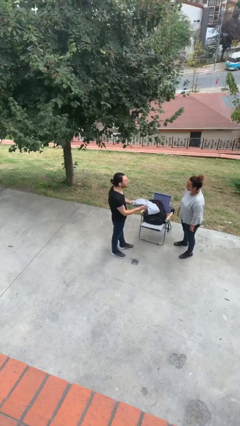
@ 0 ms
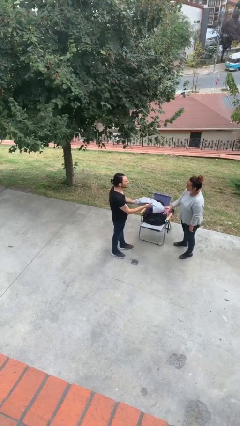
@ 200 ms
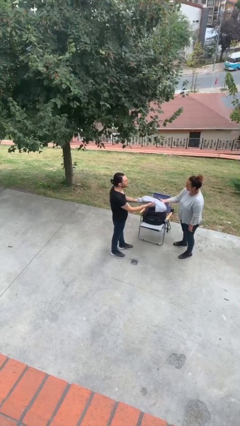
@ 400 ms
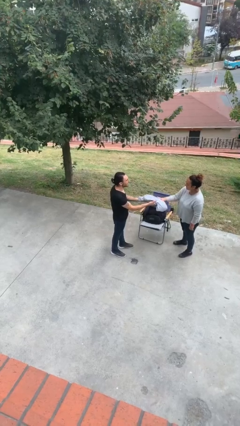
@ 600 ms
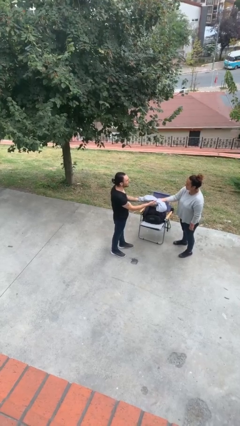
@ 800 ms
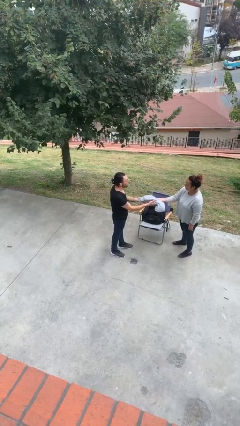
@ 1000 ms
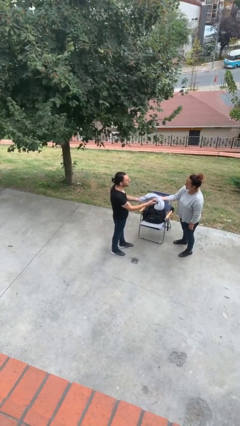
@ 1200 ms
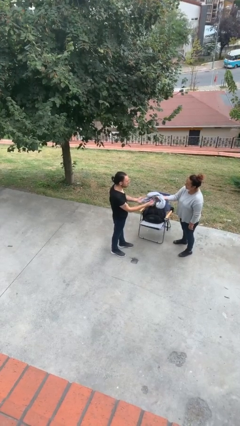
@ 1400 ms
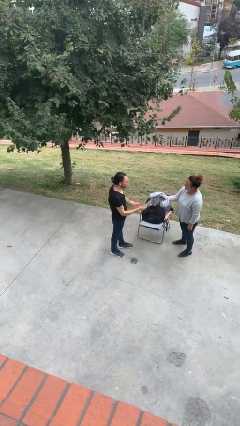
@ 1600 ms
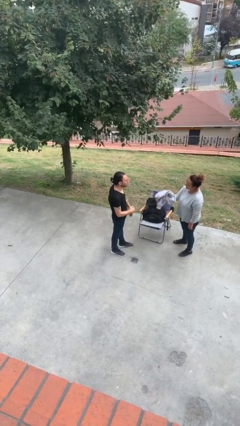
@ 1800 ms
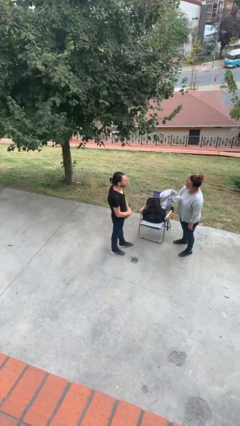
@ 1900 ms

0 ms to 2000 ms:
person transfers object to person

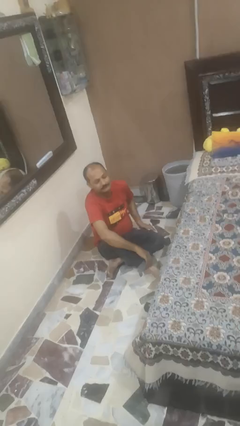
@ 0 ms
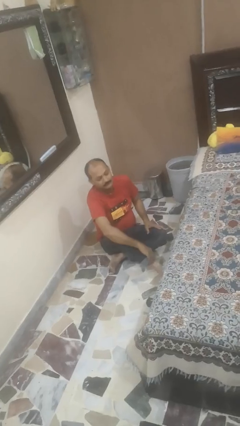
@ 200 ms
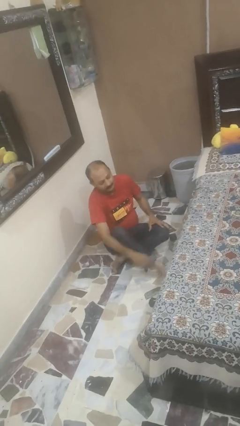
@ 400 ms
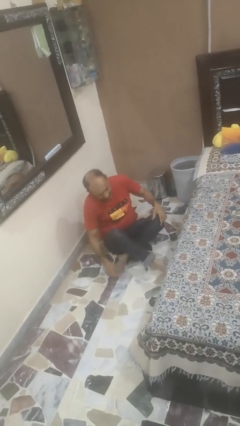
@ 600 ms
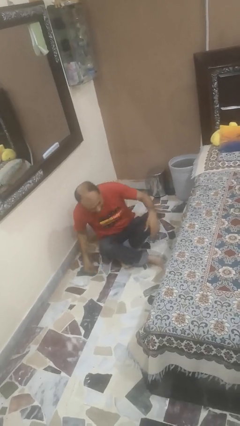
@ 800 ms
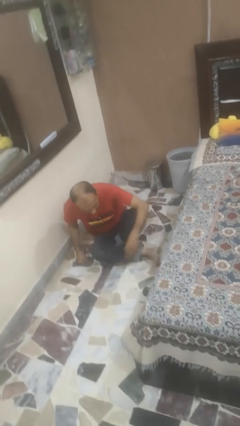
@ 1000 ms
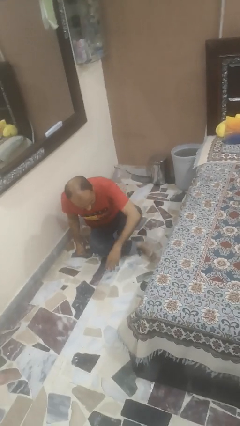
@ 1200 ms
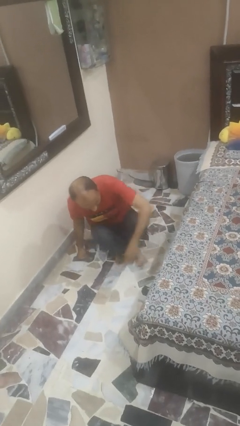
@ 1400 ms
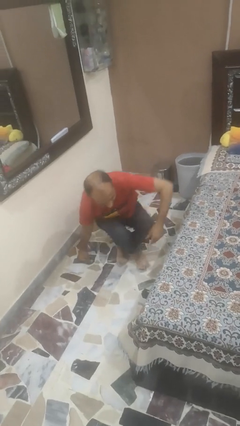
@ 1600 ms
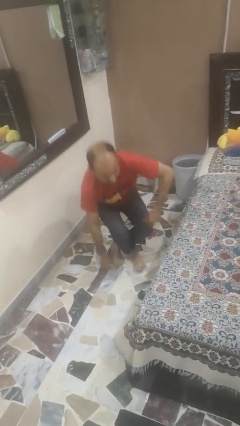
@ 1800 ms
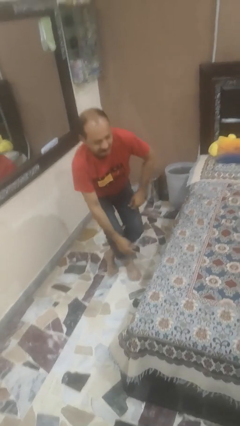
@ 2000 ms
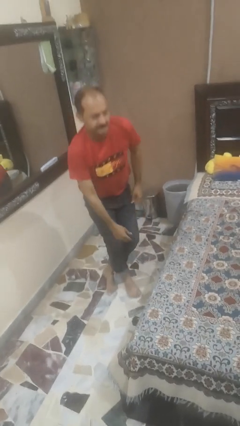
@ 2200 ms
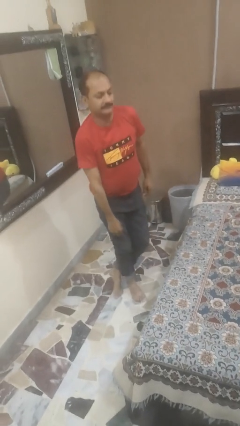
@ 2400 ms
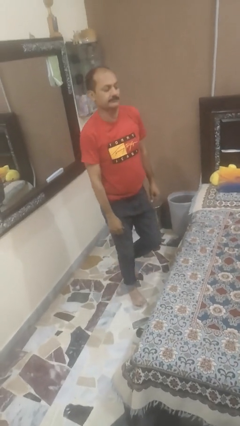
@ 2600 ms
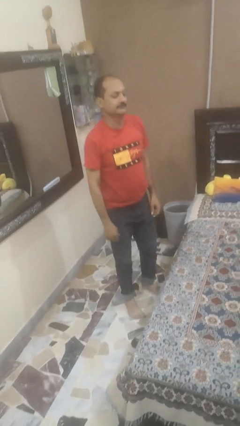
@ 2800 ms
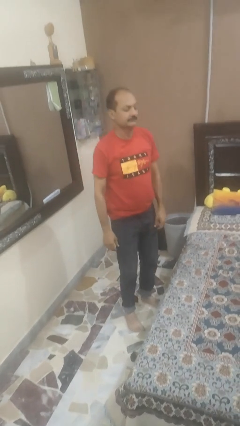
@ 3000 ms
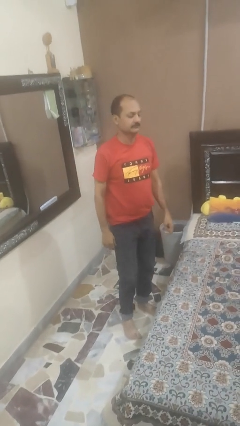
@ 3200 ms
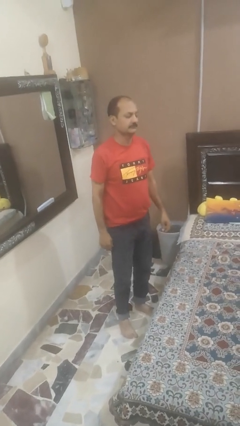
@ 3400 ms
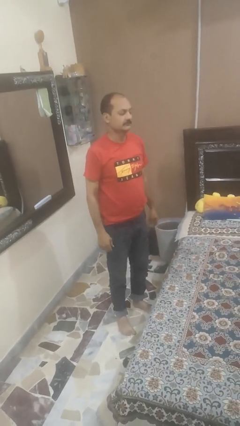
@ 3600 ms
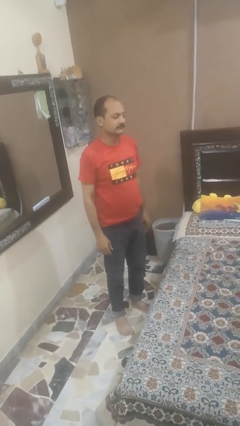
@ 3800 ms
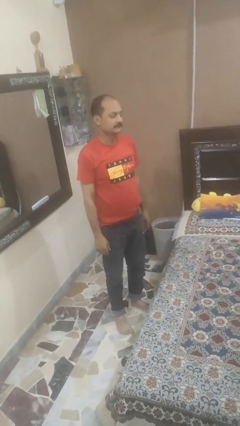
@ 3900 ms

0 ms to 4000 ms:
person stands up from floor

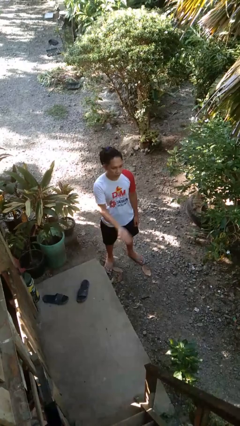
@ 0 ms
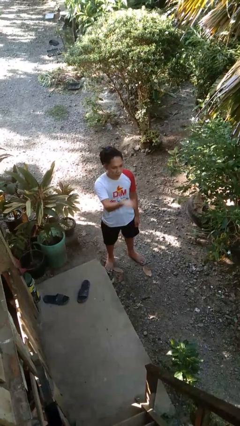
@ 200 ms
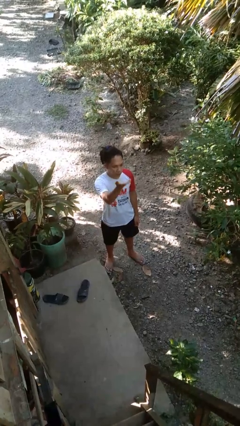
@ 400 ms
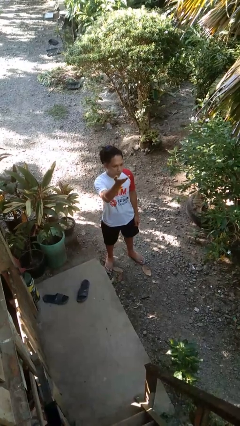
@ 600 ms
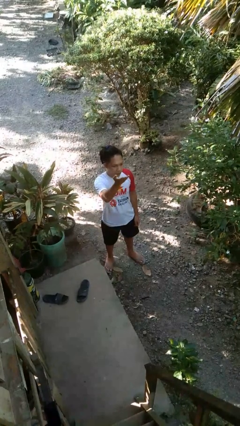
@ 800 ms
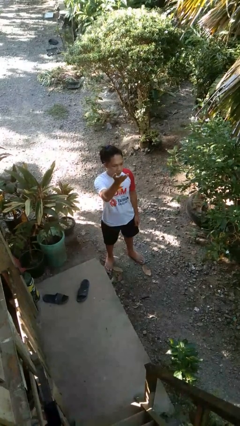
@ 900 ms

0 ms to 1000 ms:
person gestures swipe up

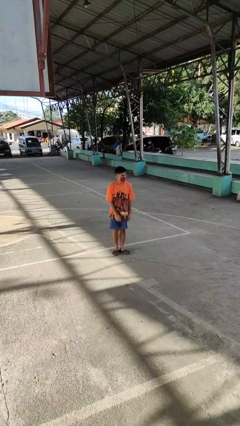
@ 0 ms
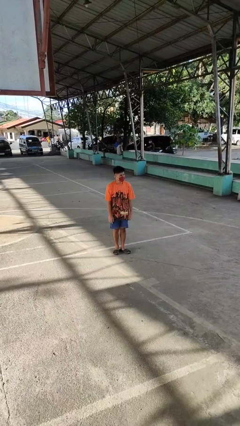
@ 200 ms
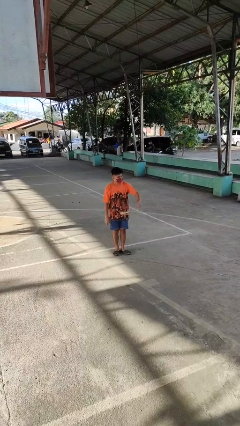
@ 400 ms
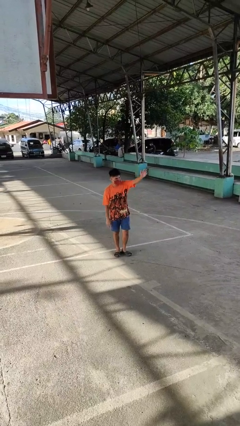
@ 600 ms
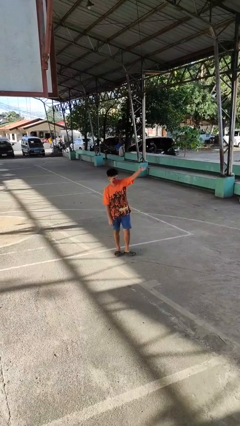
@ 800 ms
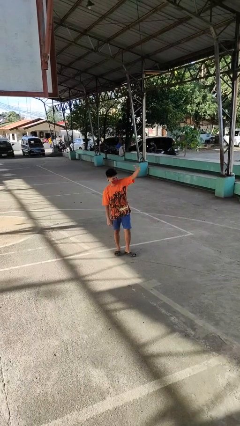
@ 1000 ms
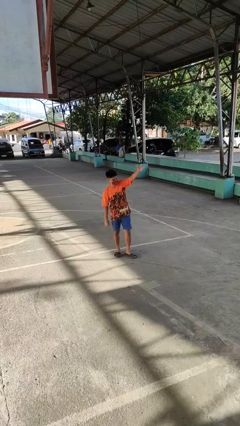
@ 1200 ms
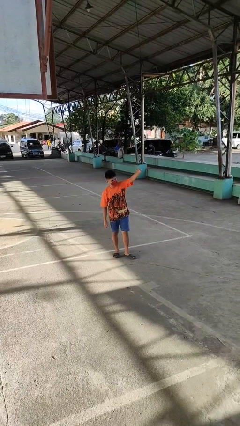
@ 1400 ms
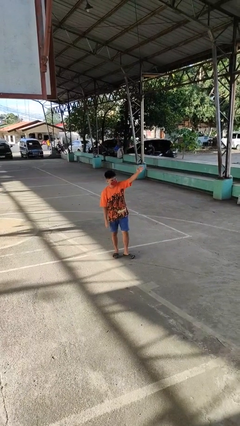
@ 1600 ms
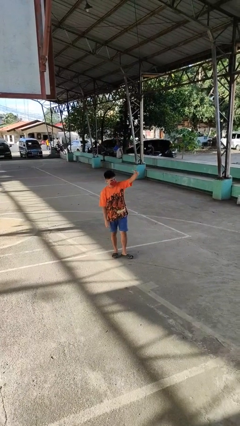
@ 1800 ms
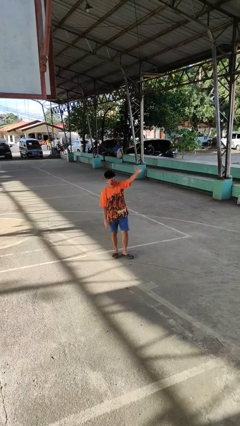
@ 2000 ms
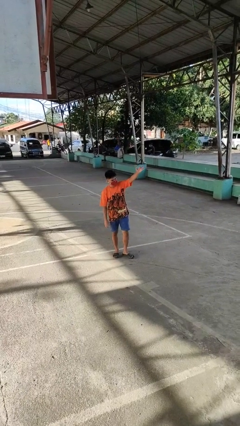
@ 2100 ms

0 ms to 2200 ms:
person gestures come here

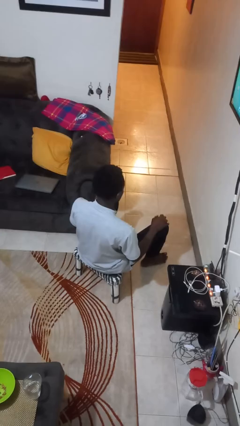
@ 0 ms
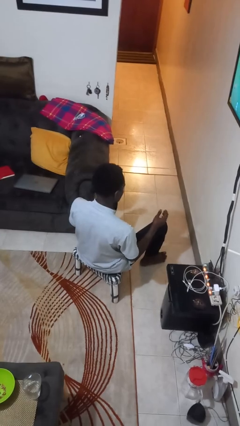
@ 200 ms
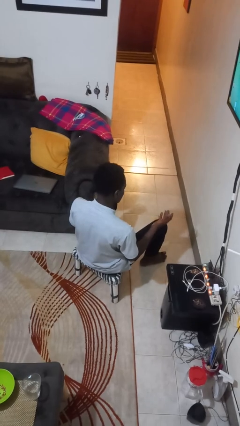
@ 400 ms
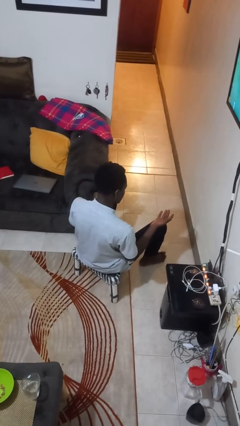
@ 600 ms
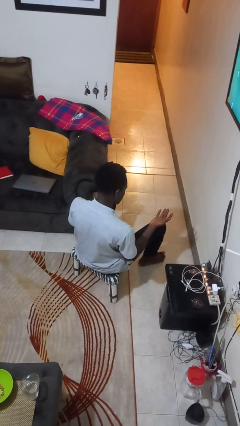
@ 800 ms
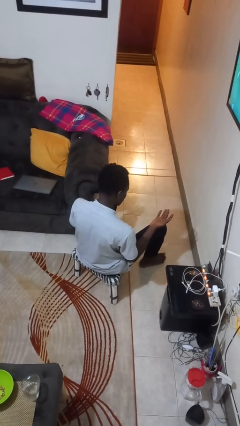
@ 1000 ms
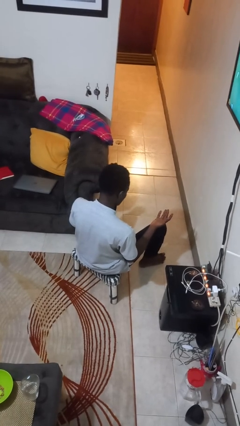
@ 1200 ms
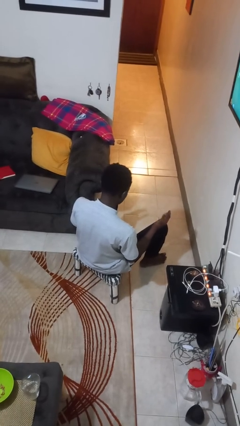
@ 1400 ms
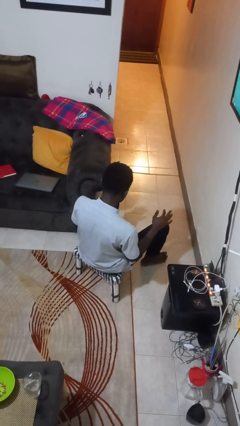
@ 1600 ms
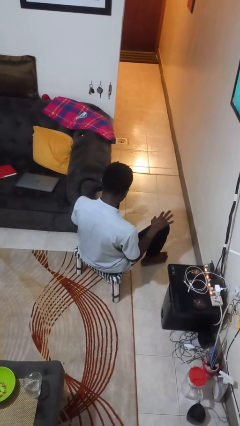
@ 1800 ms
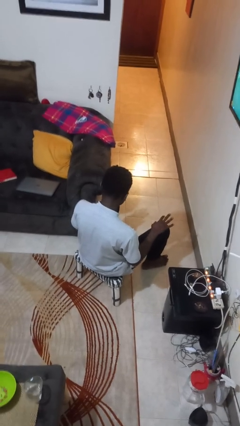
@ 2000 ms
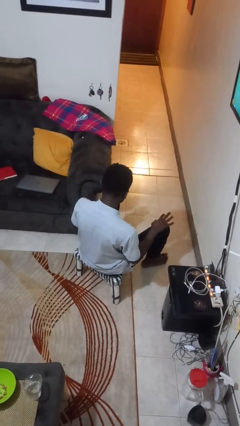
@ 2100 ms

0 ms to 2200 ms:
person looks at hands in lap

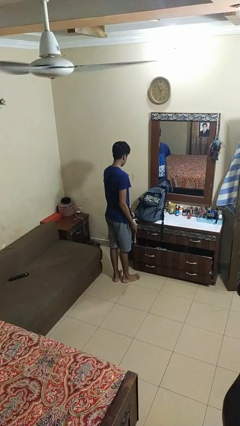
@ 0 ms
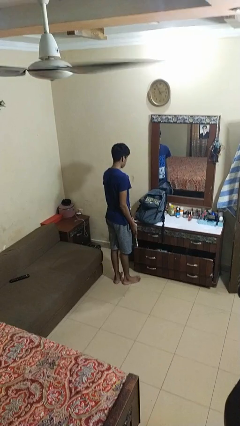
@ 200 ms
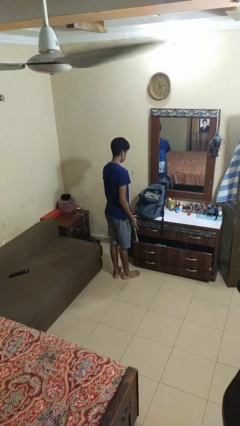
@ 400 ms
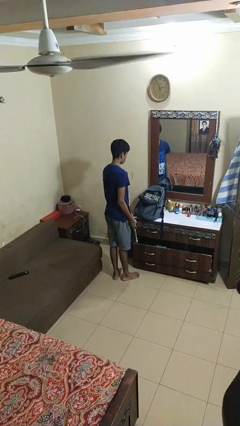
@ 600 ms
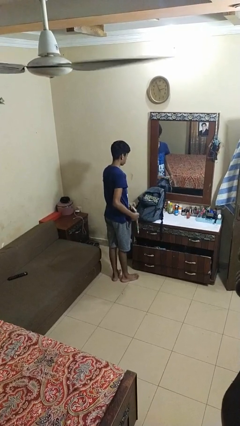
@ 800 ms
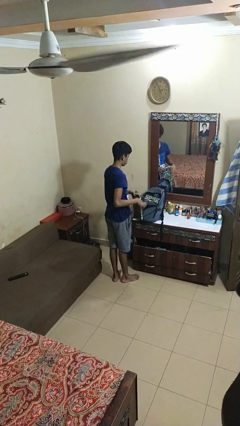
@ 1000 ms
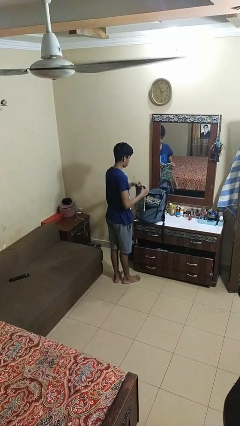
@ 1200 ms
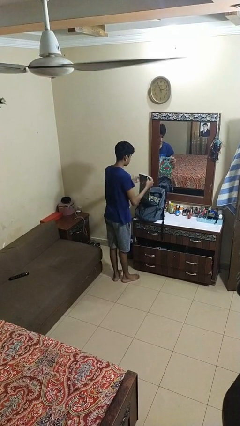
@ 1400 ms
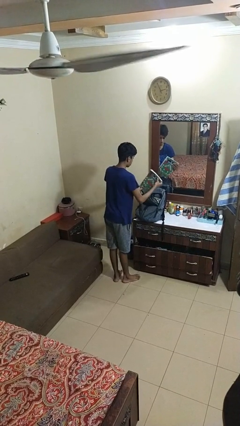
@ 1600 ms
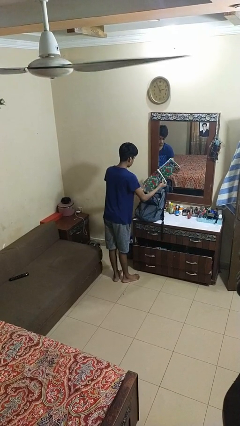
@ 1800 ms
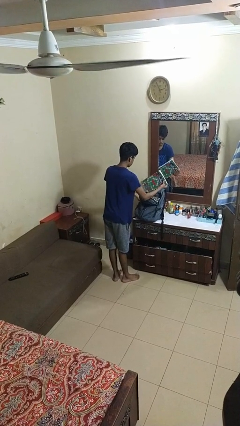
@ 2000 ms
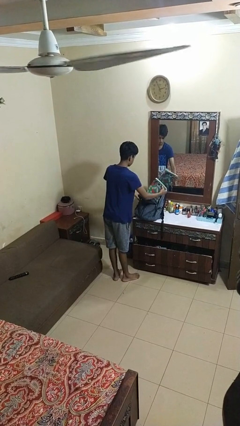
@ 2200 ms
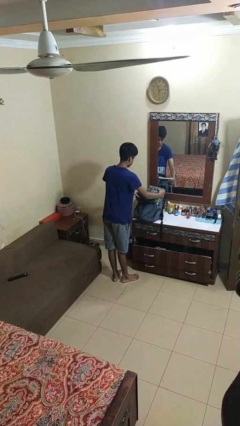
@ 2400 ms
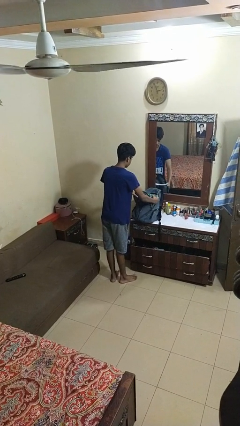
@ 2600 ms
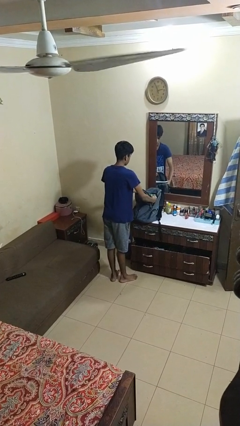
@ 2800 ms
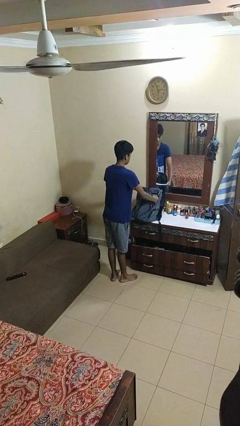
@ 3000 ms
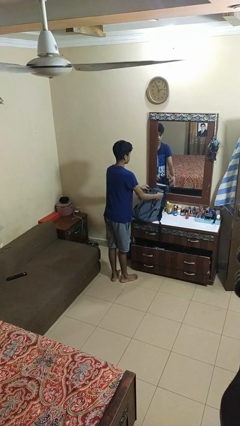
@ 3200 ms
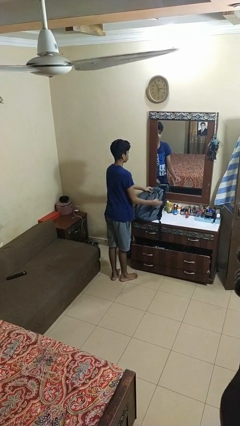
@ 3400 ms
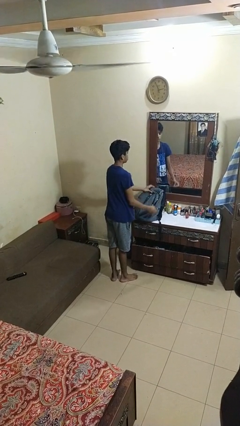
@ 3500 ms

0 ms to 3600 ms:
person puts object into bag

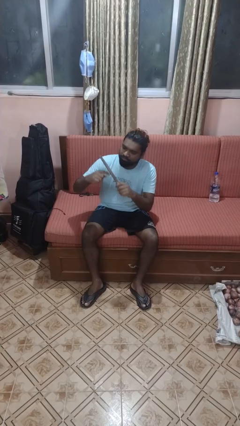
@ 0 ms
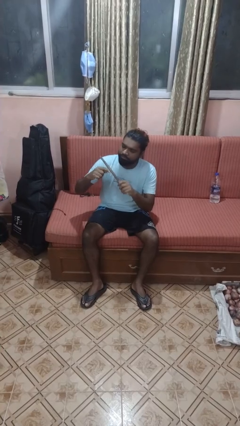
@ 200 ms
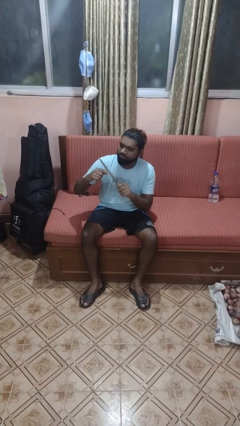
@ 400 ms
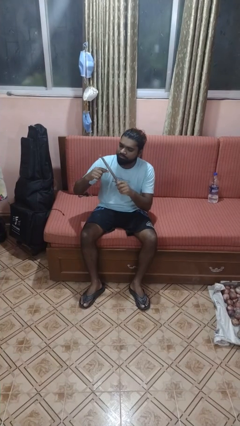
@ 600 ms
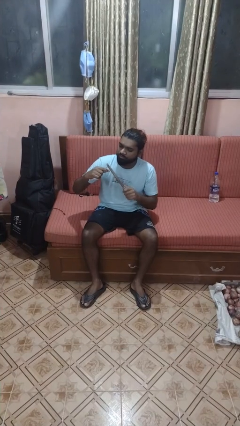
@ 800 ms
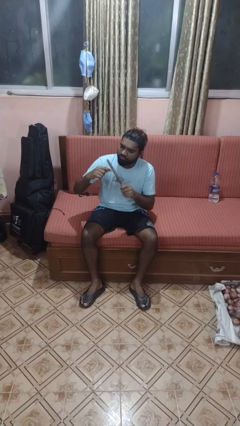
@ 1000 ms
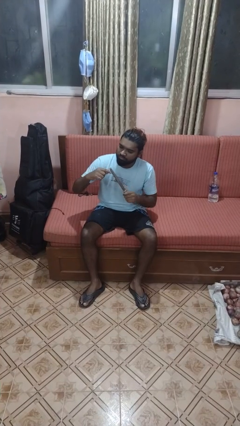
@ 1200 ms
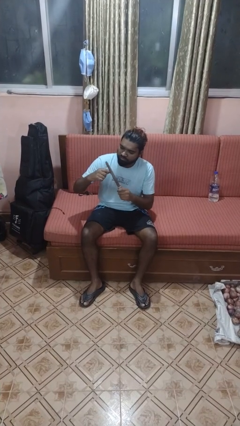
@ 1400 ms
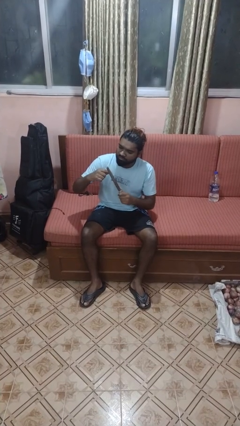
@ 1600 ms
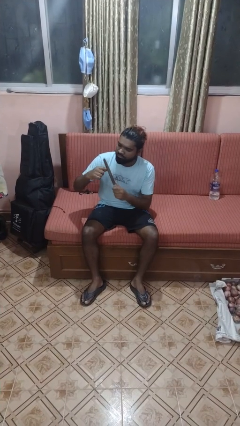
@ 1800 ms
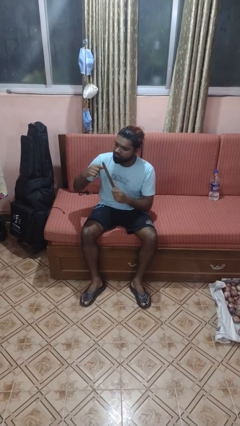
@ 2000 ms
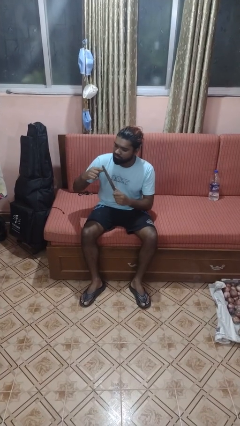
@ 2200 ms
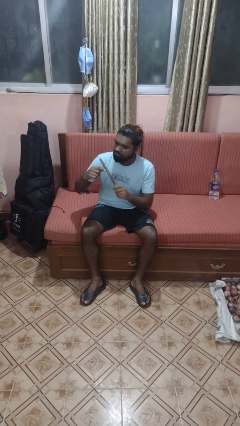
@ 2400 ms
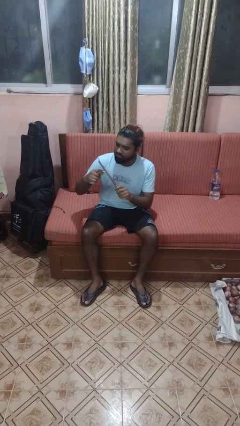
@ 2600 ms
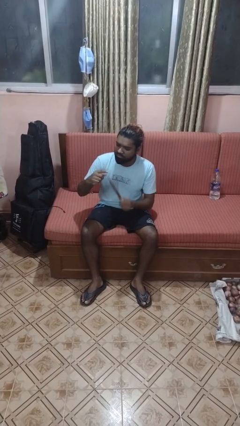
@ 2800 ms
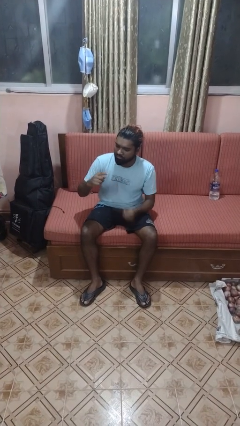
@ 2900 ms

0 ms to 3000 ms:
person files fingernails
